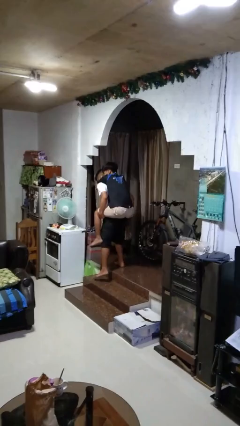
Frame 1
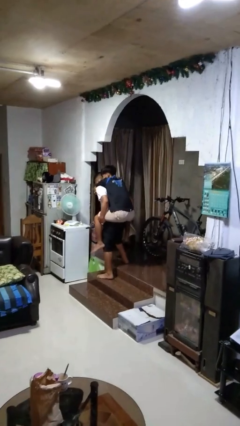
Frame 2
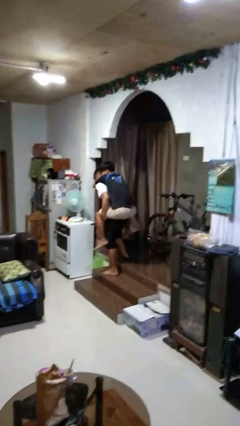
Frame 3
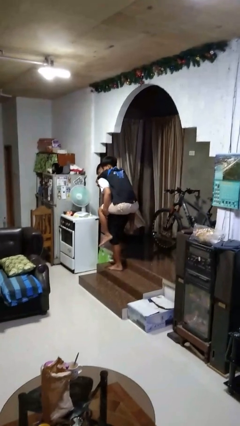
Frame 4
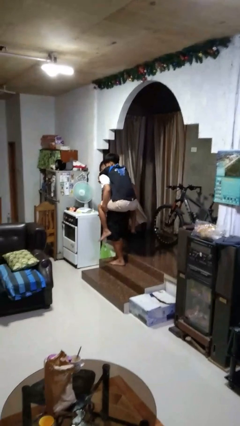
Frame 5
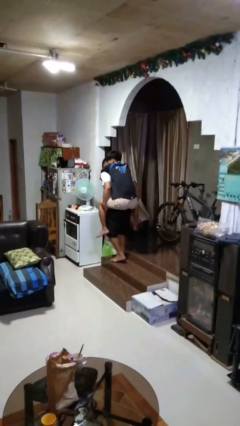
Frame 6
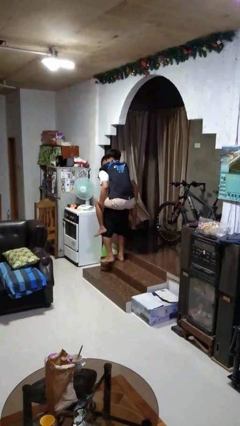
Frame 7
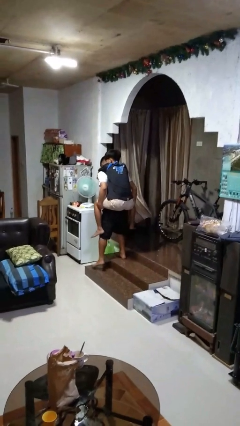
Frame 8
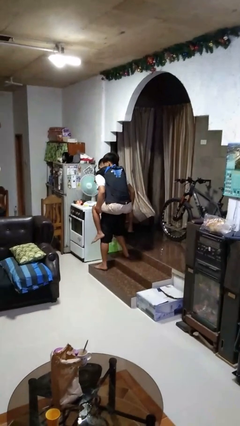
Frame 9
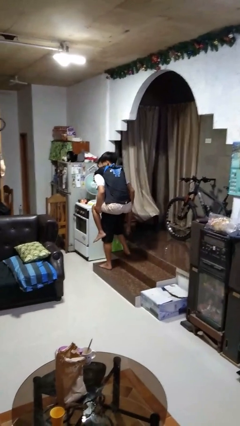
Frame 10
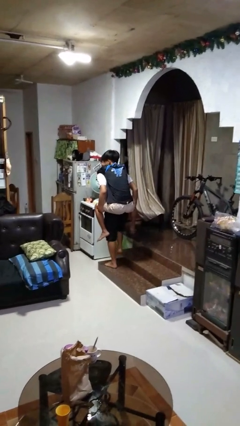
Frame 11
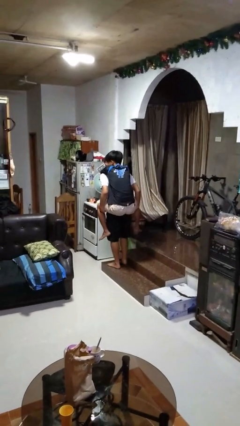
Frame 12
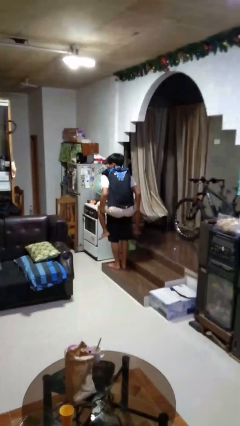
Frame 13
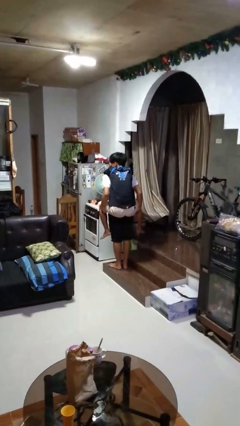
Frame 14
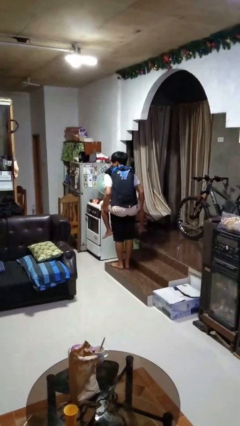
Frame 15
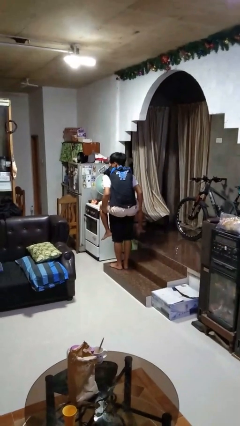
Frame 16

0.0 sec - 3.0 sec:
person carries person on back

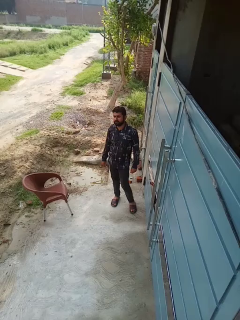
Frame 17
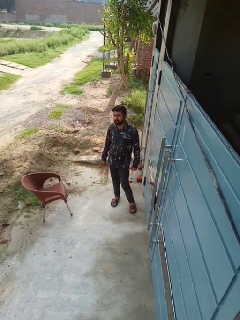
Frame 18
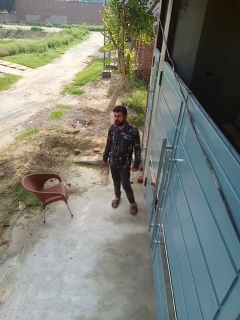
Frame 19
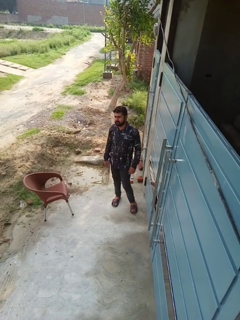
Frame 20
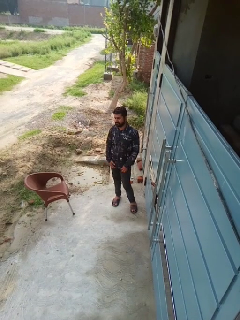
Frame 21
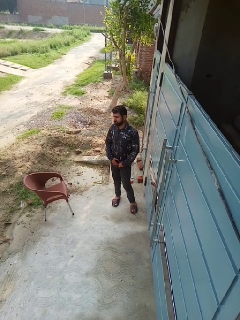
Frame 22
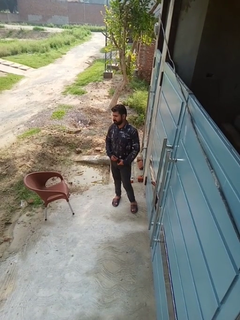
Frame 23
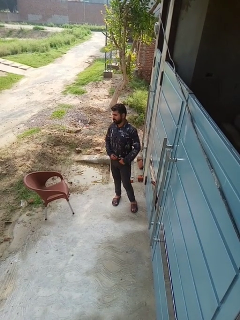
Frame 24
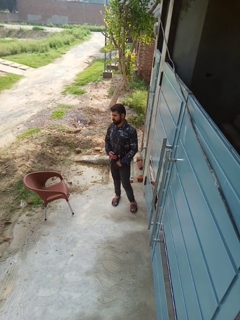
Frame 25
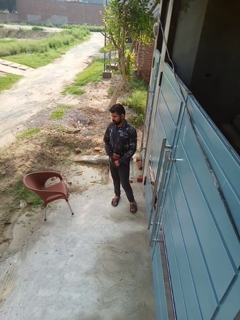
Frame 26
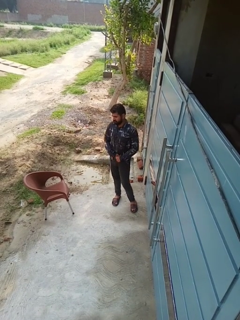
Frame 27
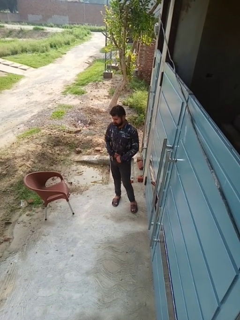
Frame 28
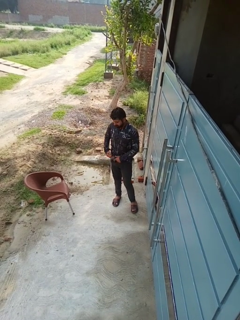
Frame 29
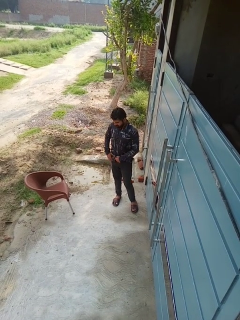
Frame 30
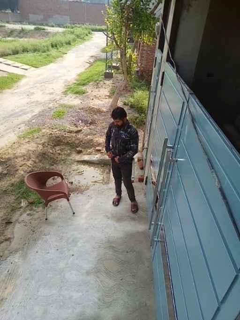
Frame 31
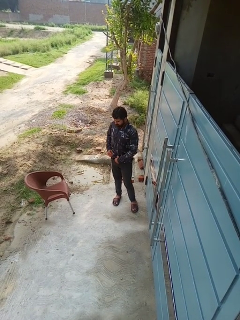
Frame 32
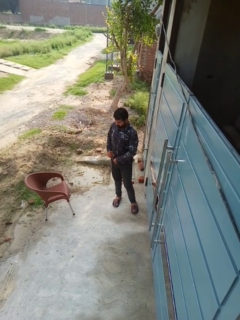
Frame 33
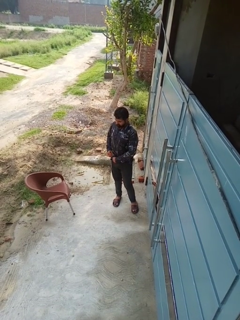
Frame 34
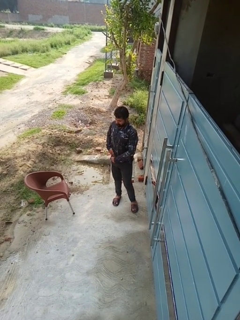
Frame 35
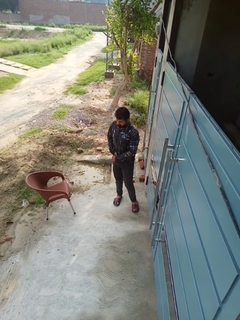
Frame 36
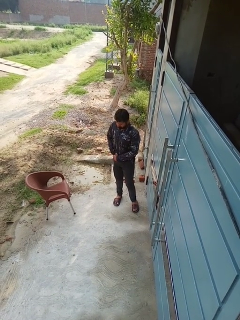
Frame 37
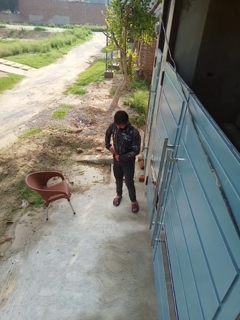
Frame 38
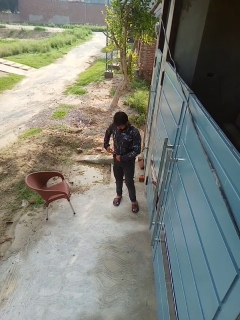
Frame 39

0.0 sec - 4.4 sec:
person tucks in shirt

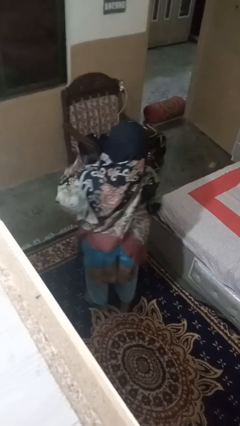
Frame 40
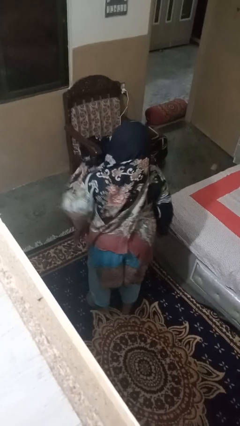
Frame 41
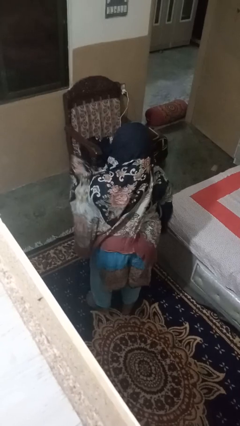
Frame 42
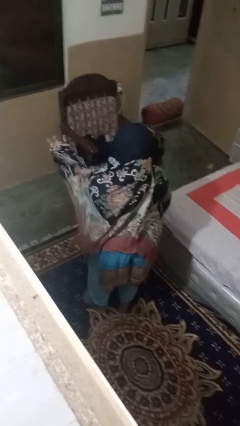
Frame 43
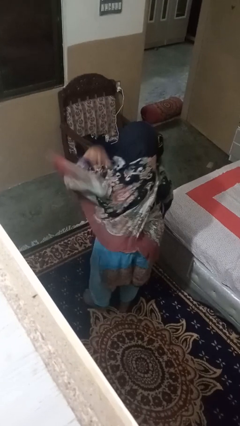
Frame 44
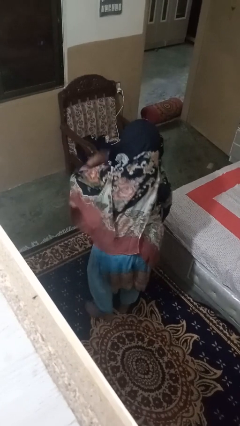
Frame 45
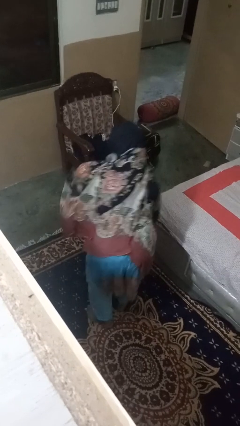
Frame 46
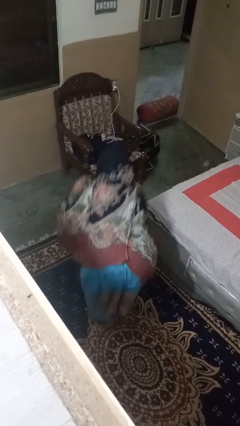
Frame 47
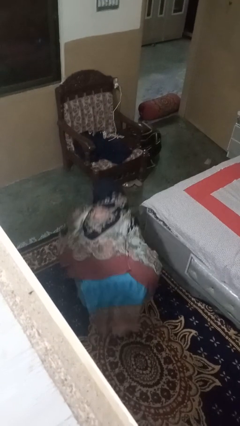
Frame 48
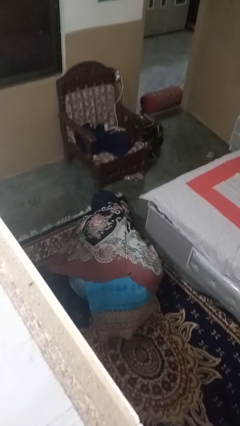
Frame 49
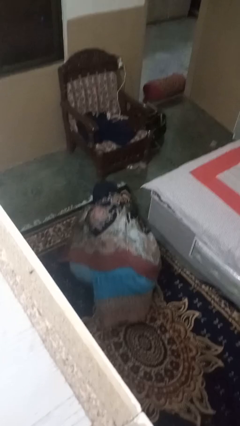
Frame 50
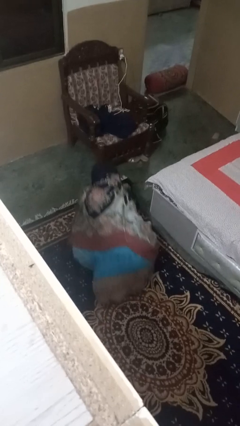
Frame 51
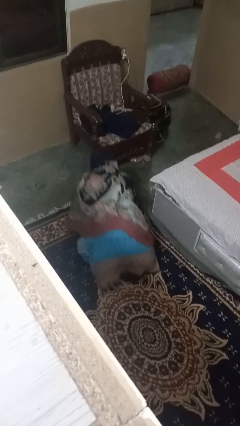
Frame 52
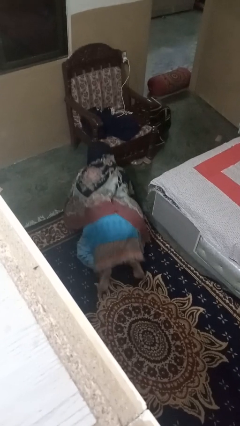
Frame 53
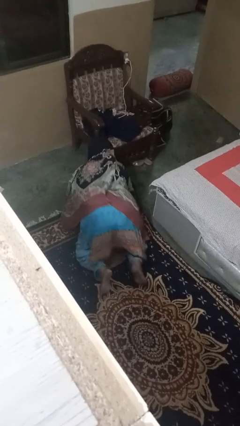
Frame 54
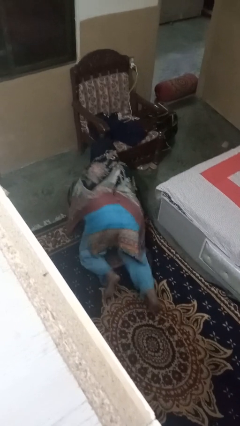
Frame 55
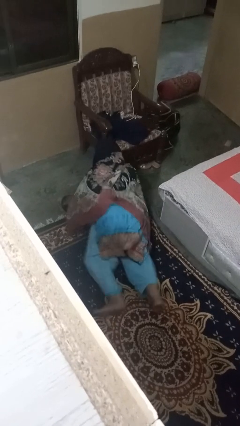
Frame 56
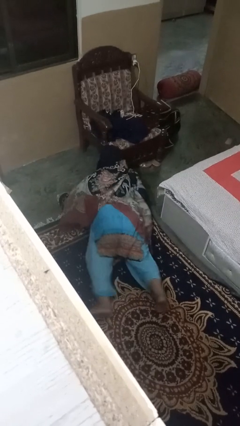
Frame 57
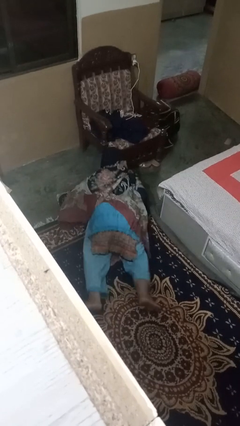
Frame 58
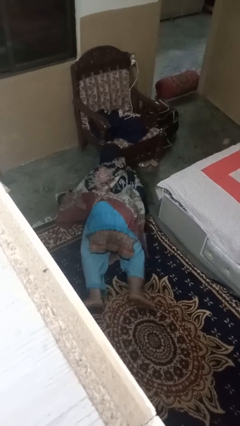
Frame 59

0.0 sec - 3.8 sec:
person exercises with pushup

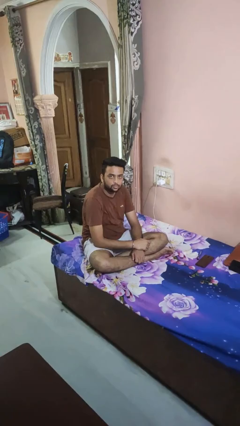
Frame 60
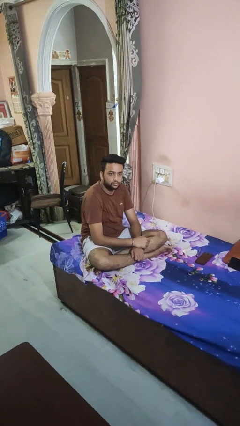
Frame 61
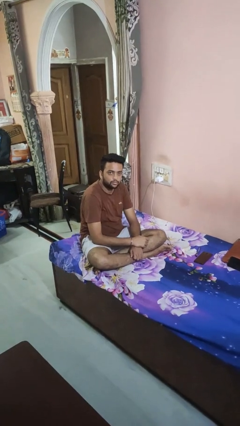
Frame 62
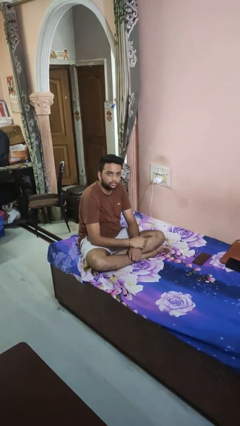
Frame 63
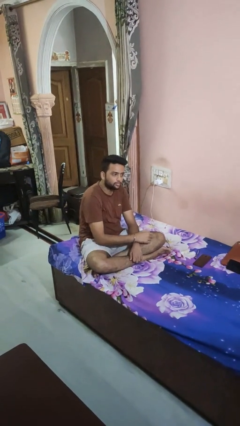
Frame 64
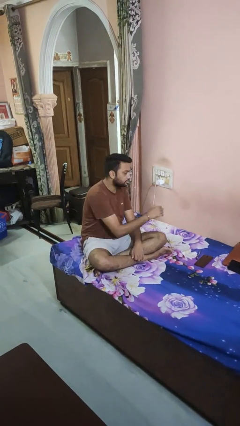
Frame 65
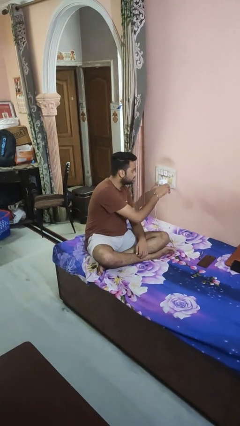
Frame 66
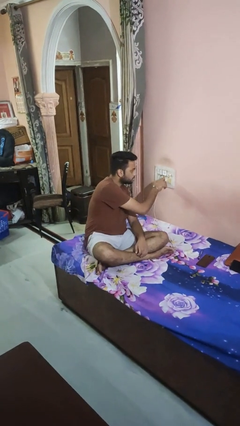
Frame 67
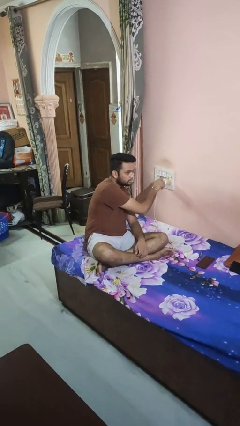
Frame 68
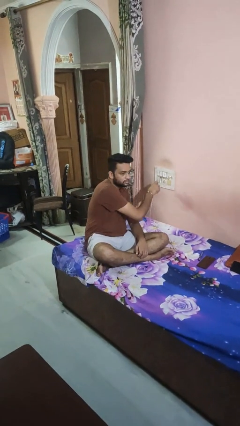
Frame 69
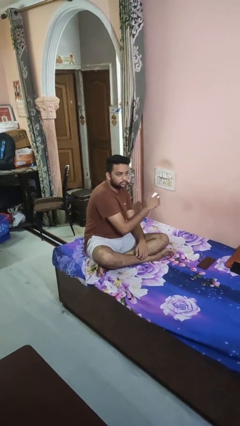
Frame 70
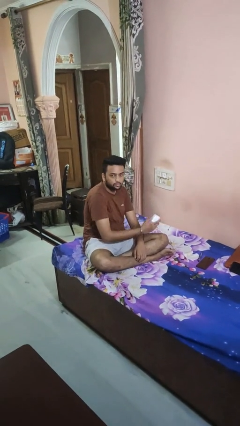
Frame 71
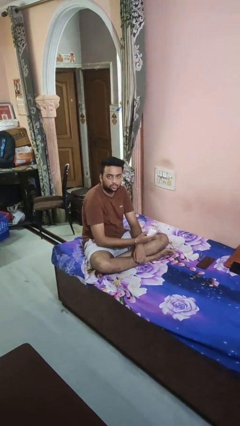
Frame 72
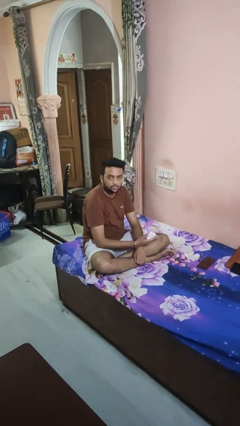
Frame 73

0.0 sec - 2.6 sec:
person unplugs from electrical socket

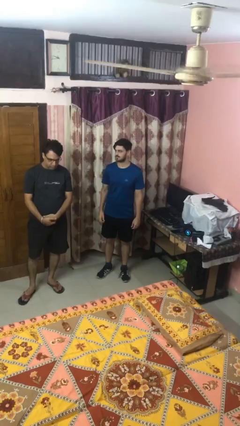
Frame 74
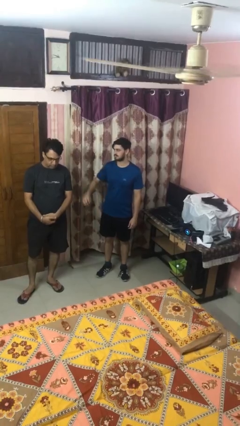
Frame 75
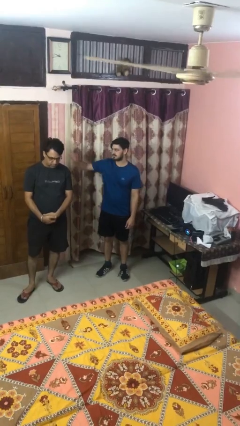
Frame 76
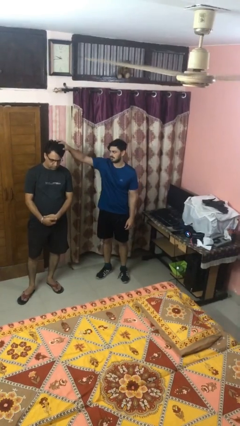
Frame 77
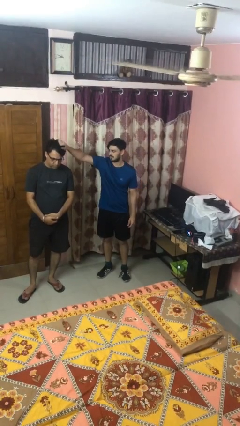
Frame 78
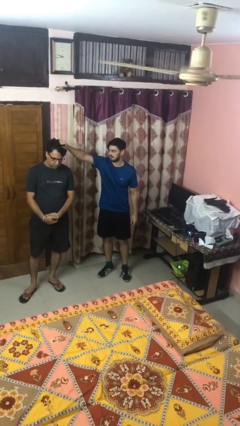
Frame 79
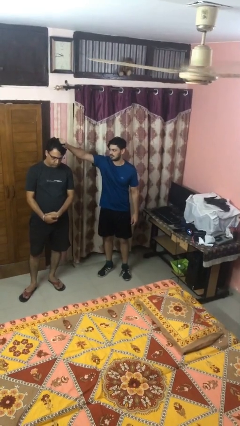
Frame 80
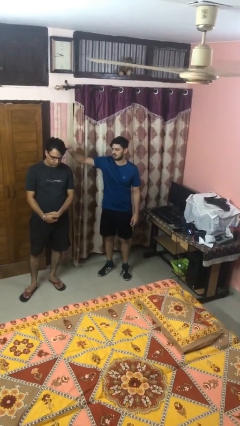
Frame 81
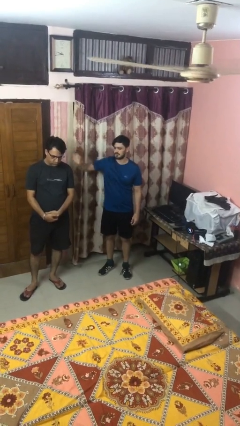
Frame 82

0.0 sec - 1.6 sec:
person grabs person by hair

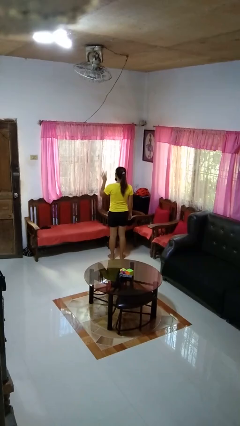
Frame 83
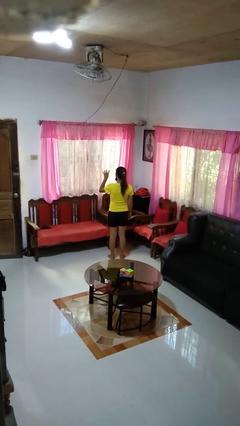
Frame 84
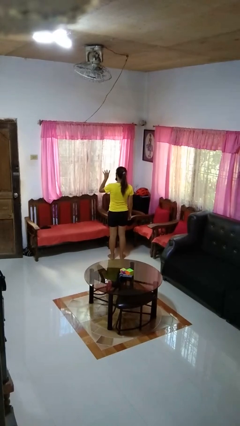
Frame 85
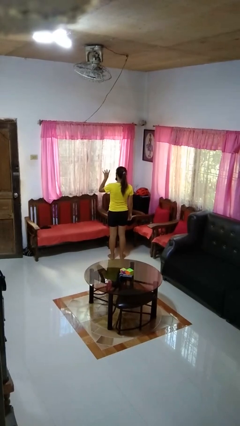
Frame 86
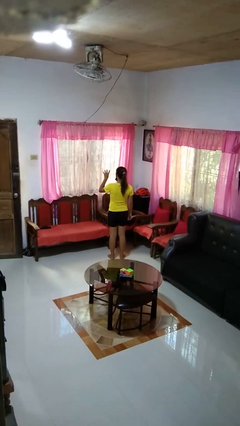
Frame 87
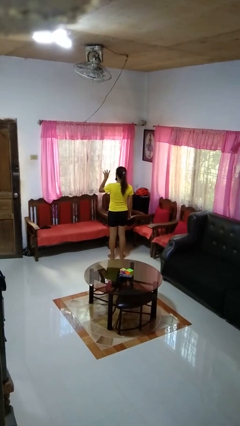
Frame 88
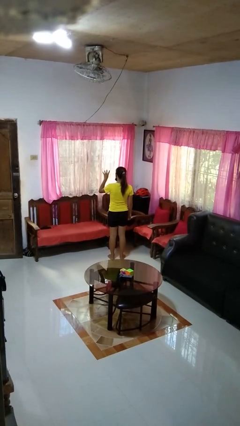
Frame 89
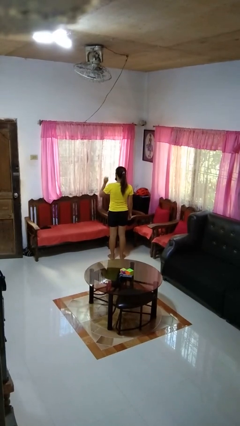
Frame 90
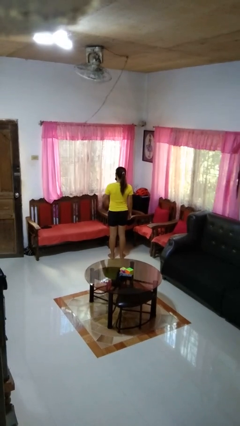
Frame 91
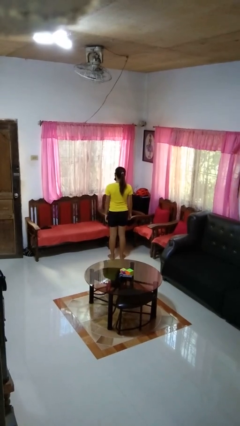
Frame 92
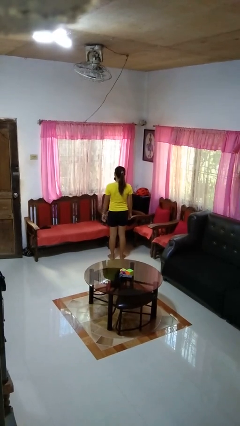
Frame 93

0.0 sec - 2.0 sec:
person gestures number four

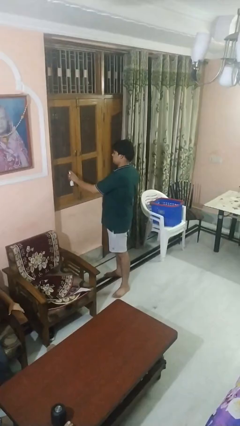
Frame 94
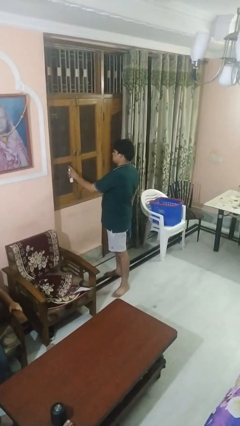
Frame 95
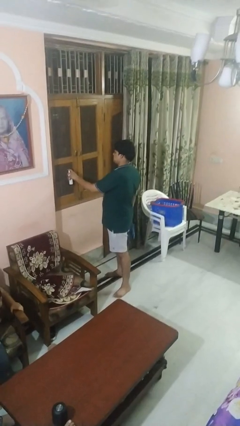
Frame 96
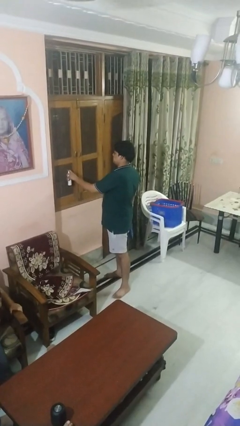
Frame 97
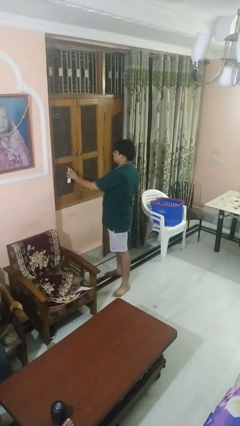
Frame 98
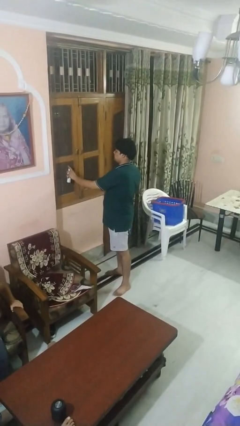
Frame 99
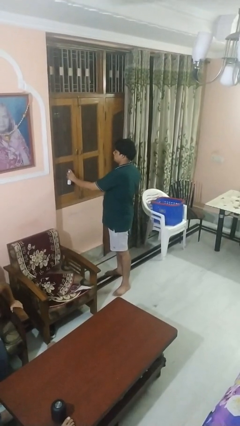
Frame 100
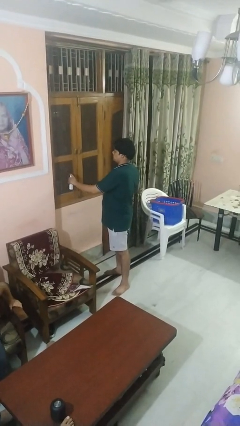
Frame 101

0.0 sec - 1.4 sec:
person sprays from bottle
